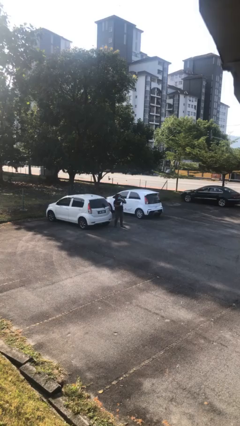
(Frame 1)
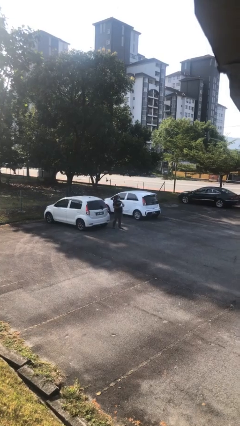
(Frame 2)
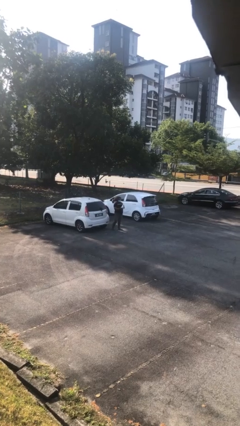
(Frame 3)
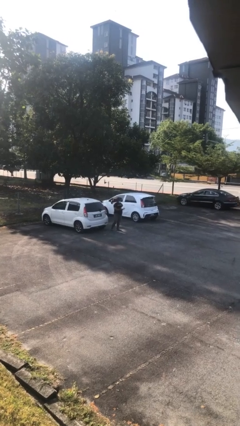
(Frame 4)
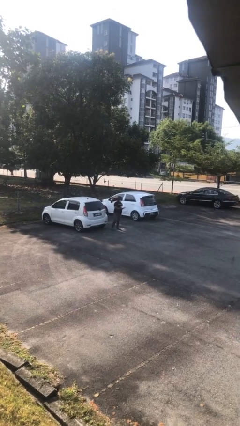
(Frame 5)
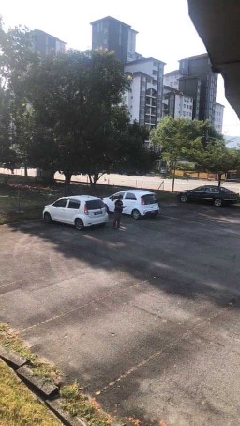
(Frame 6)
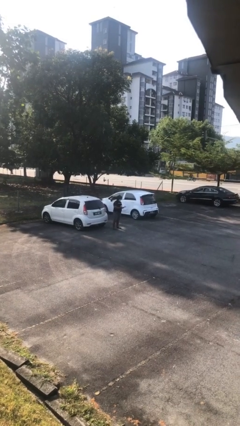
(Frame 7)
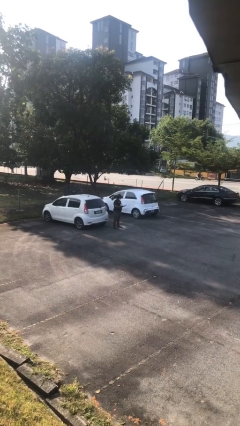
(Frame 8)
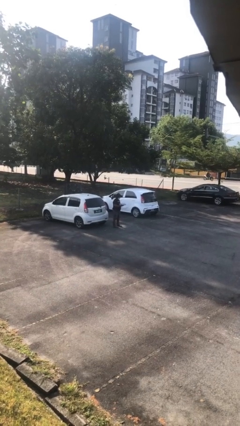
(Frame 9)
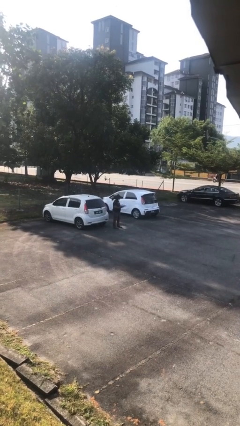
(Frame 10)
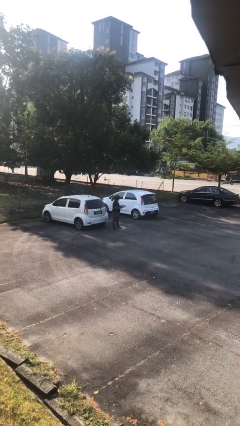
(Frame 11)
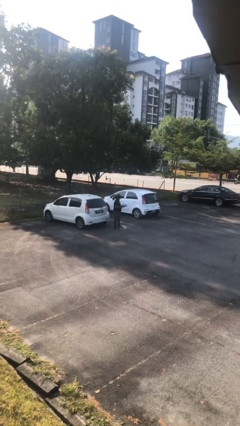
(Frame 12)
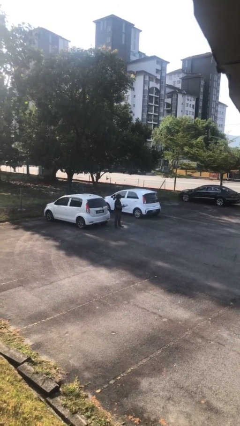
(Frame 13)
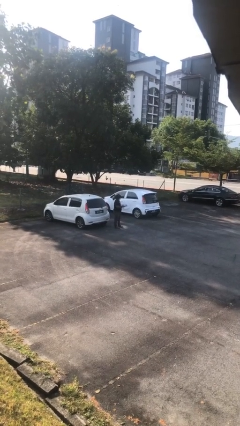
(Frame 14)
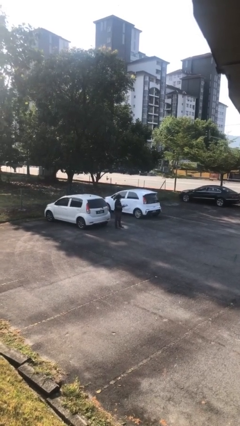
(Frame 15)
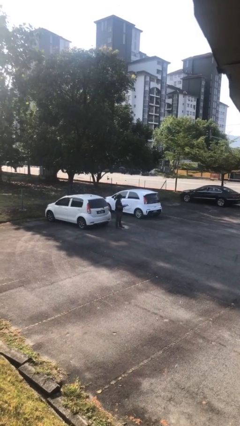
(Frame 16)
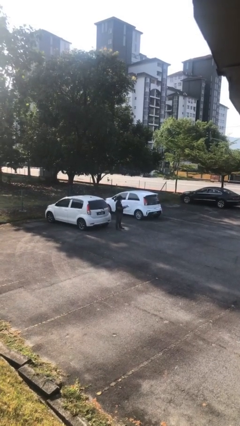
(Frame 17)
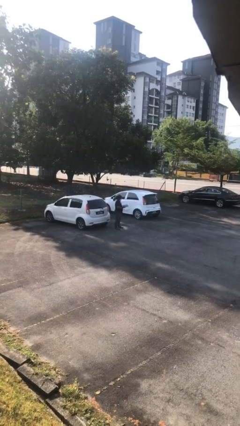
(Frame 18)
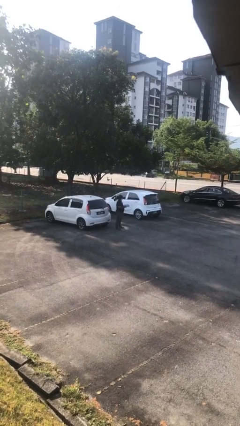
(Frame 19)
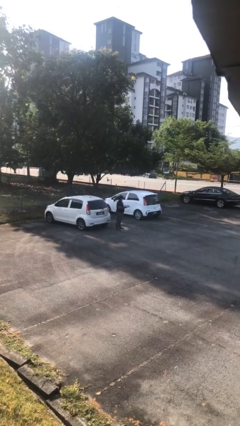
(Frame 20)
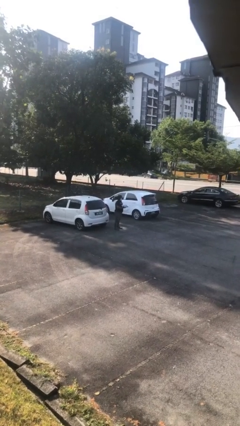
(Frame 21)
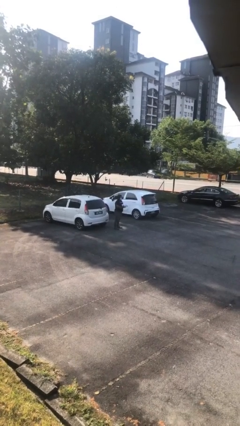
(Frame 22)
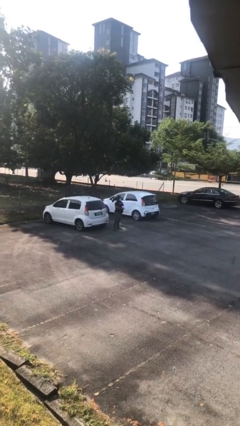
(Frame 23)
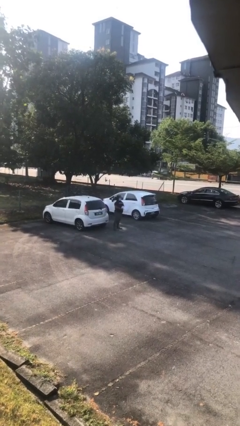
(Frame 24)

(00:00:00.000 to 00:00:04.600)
person reads document

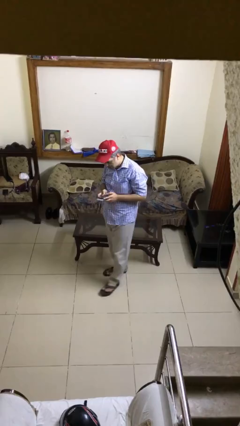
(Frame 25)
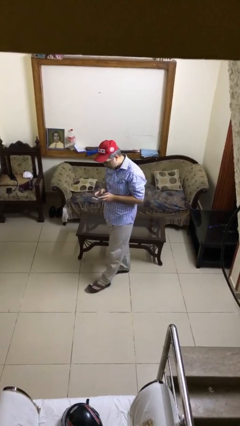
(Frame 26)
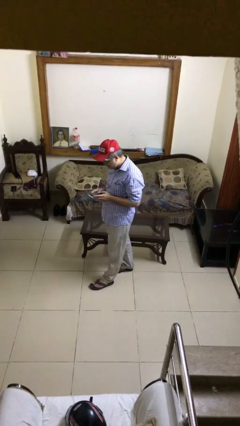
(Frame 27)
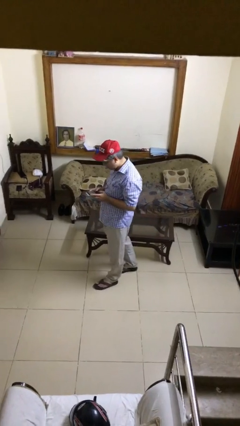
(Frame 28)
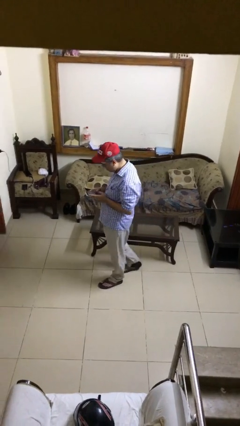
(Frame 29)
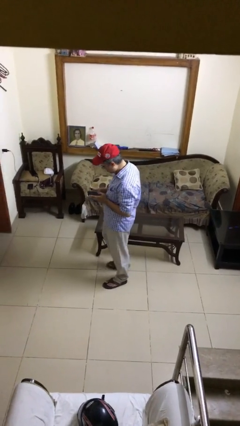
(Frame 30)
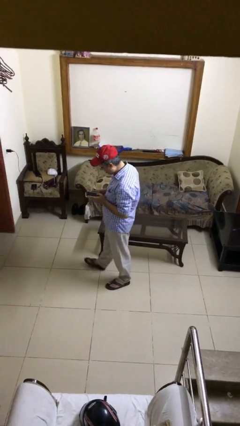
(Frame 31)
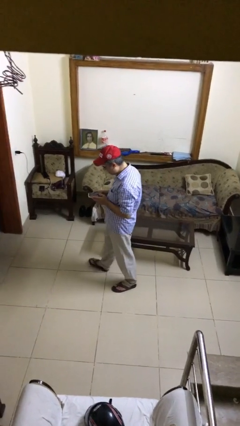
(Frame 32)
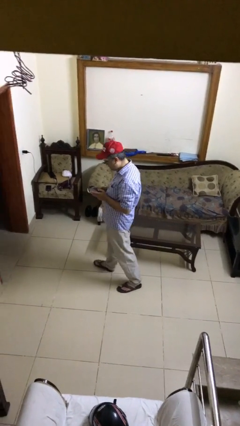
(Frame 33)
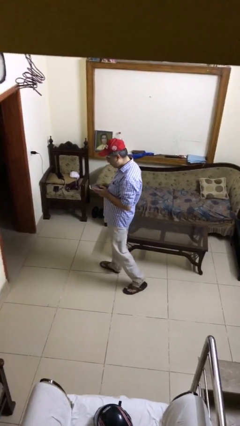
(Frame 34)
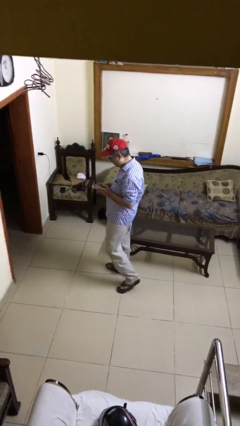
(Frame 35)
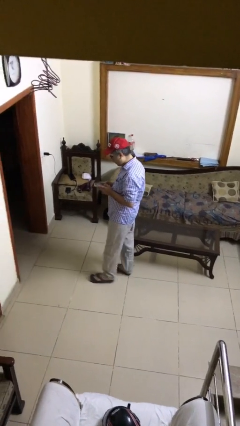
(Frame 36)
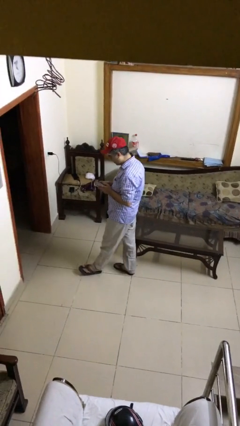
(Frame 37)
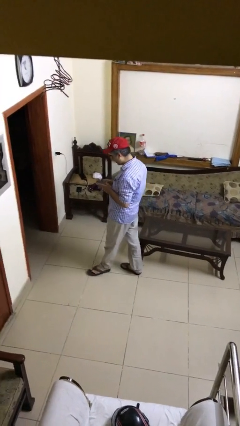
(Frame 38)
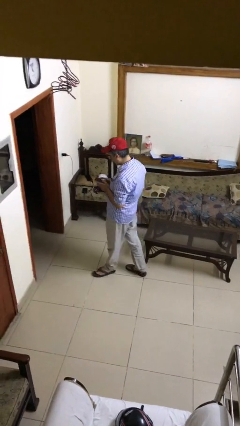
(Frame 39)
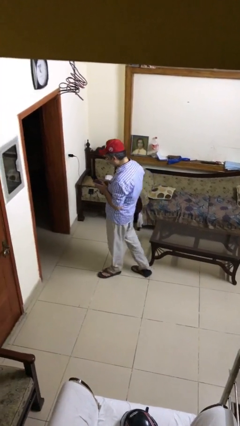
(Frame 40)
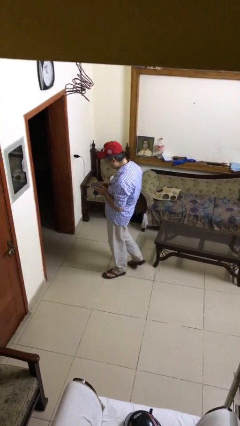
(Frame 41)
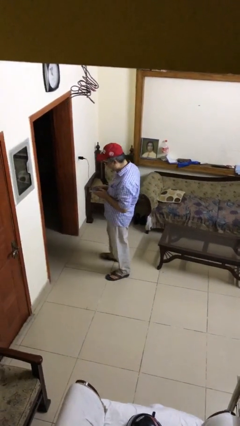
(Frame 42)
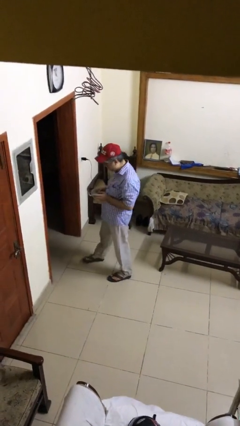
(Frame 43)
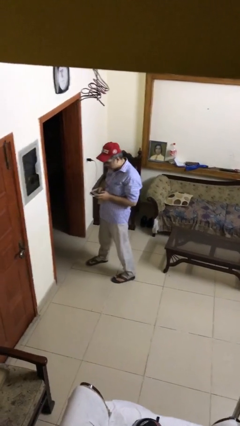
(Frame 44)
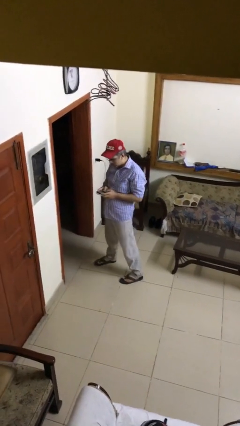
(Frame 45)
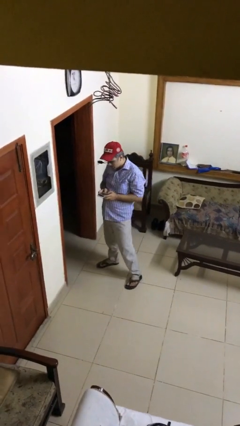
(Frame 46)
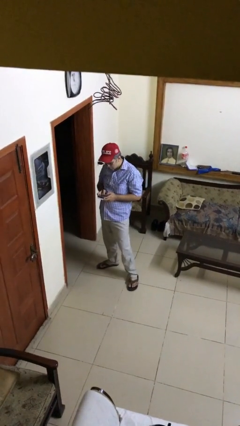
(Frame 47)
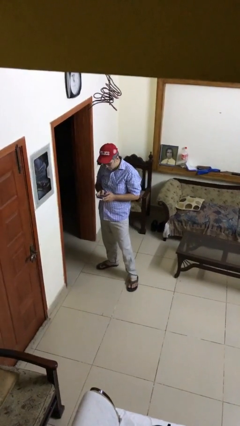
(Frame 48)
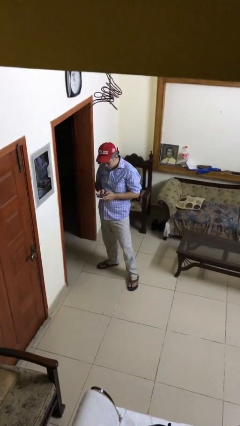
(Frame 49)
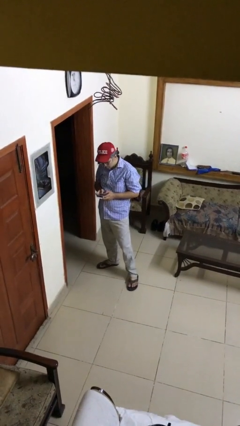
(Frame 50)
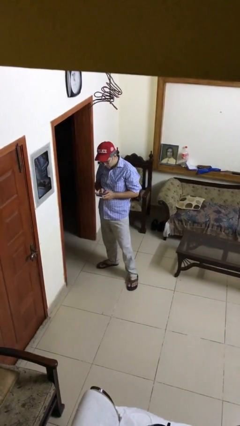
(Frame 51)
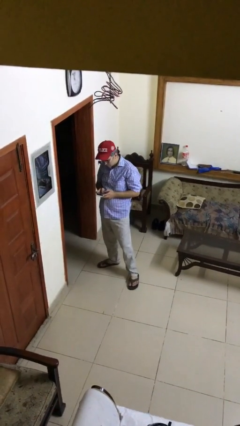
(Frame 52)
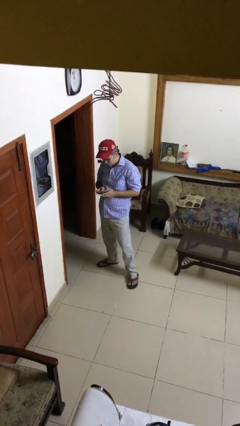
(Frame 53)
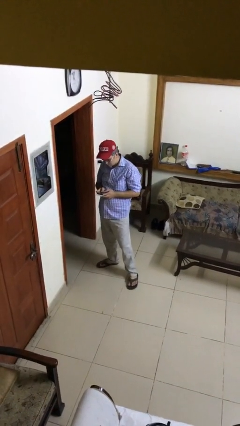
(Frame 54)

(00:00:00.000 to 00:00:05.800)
person texts on phone

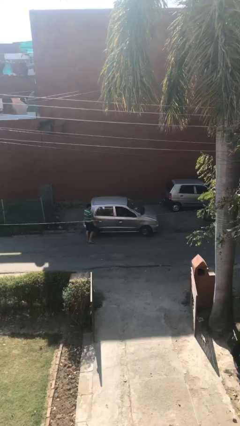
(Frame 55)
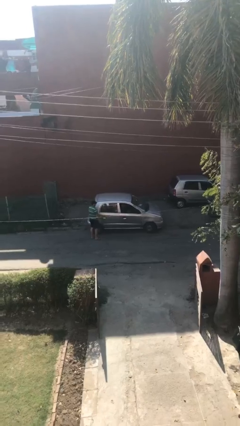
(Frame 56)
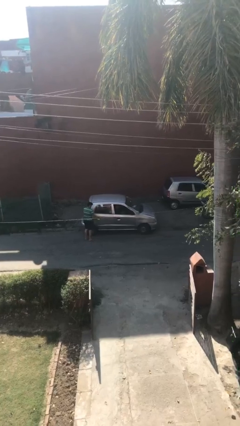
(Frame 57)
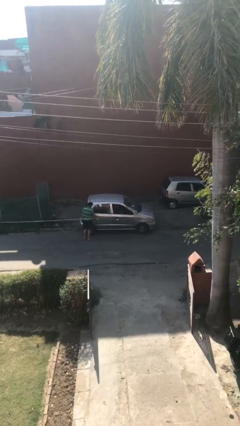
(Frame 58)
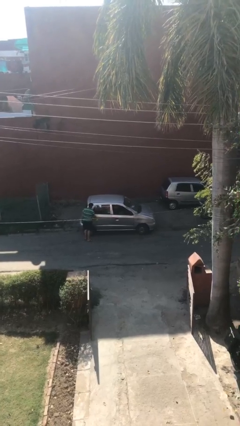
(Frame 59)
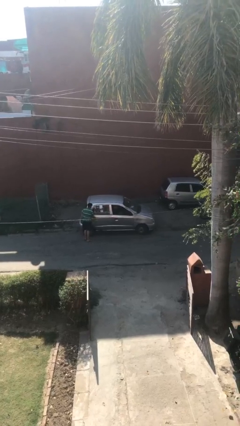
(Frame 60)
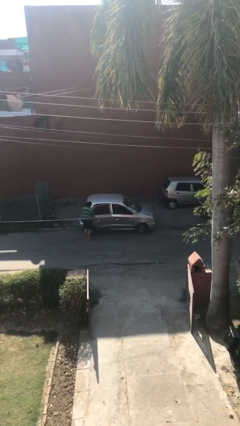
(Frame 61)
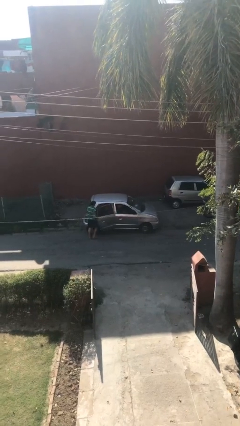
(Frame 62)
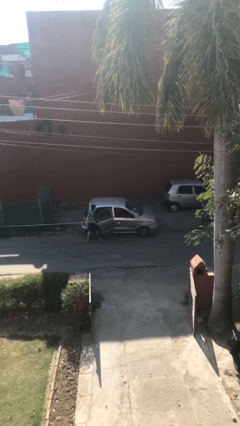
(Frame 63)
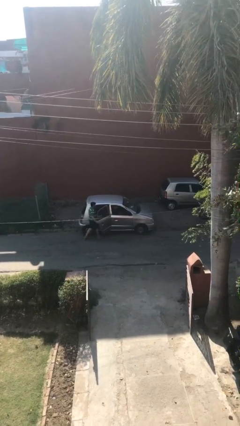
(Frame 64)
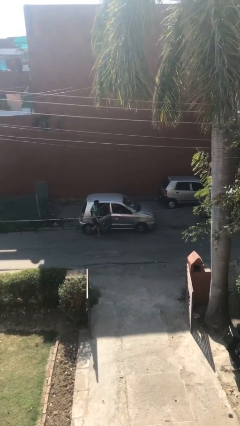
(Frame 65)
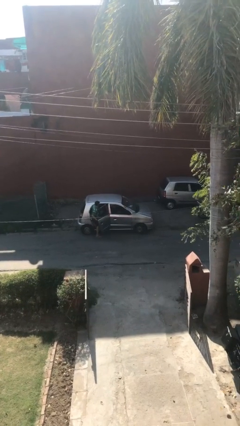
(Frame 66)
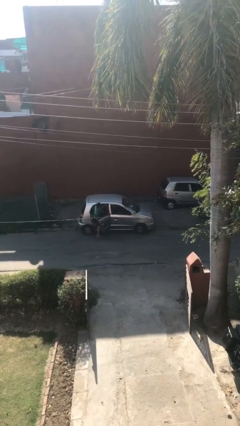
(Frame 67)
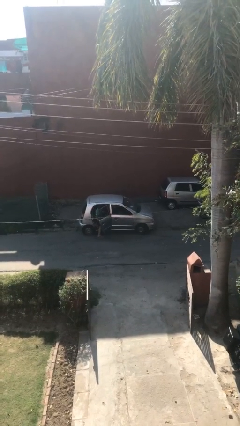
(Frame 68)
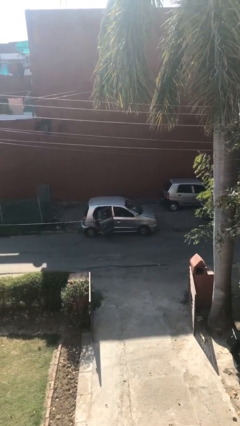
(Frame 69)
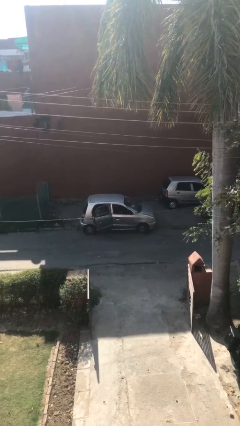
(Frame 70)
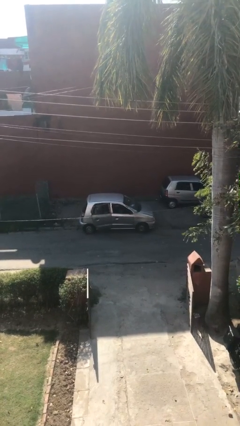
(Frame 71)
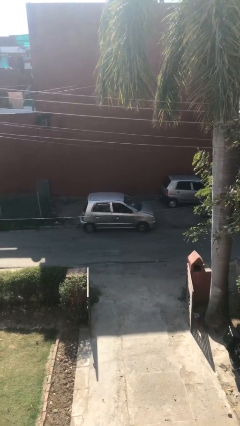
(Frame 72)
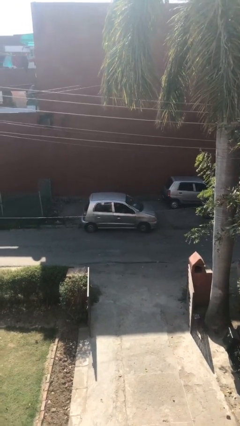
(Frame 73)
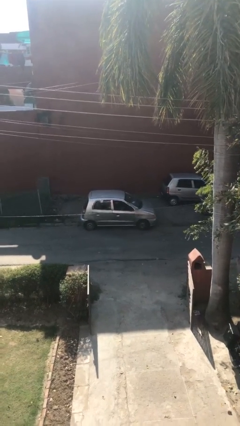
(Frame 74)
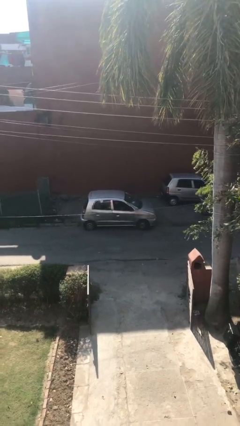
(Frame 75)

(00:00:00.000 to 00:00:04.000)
car picks up person

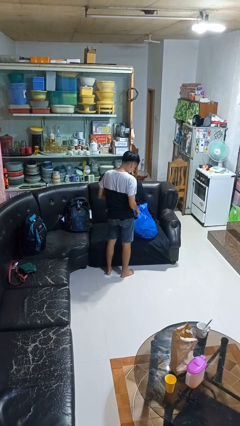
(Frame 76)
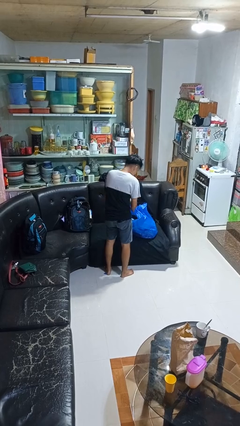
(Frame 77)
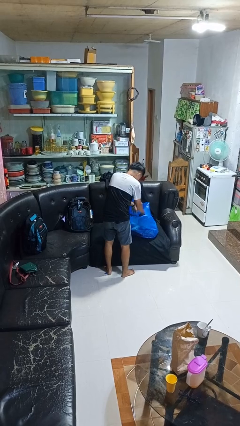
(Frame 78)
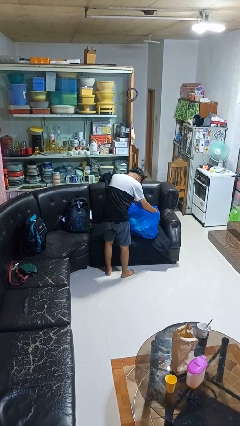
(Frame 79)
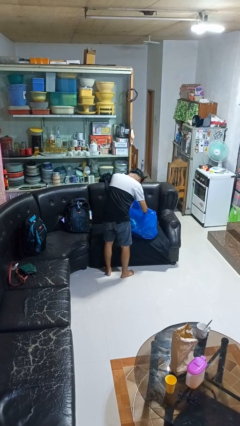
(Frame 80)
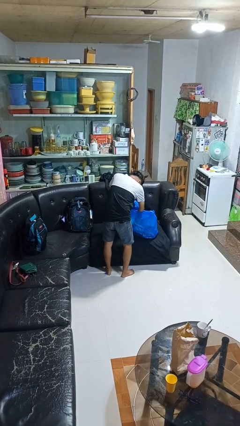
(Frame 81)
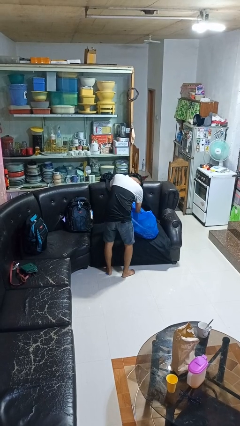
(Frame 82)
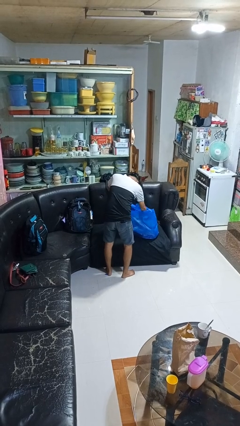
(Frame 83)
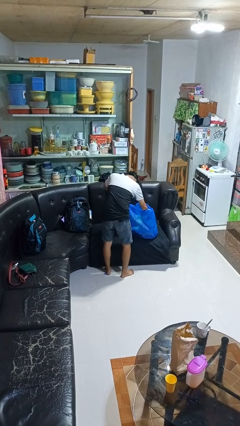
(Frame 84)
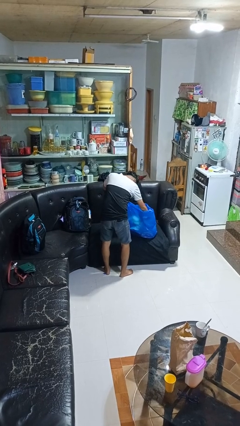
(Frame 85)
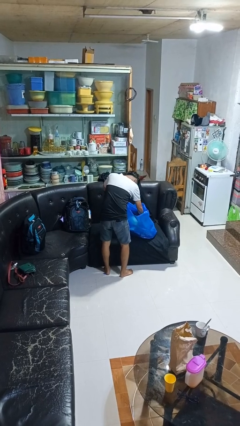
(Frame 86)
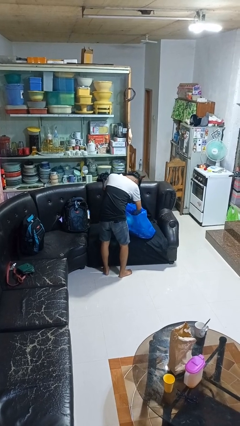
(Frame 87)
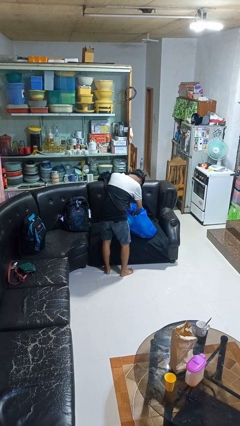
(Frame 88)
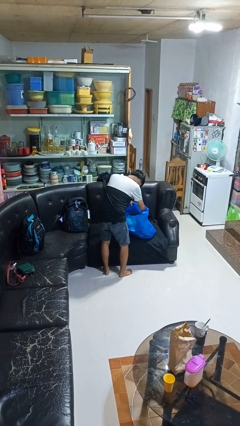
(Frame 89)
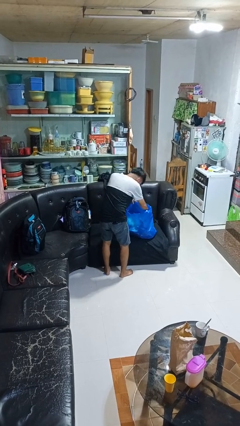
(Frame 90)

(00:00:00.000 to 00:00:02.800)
person searches in bag

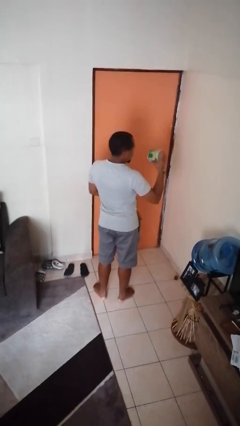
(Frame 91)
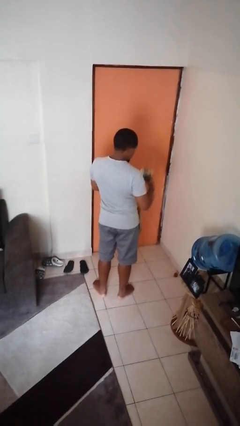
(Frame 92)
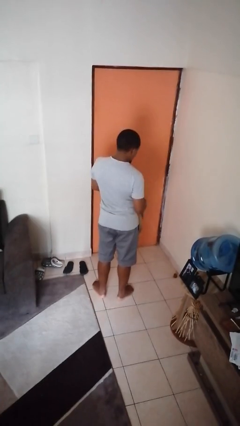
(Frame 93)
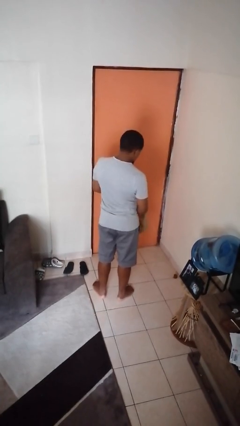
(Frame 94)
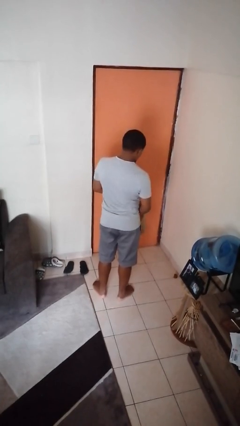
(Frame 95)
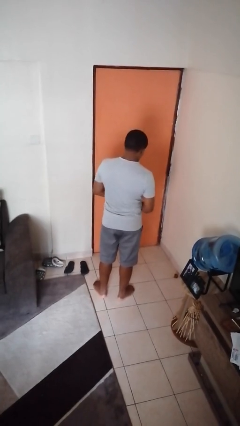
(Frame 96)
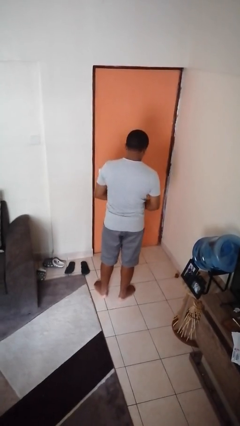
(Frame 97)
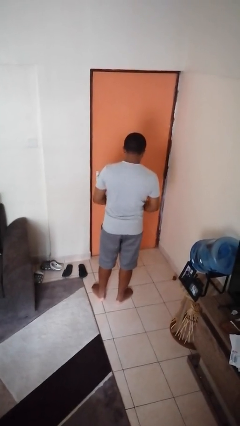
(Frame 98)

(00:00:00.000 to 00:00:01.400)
person puts object into bag
